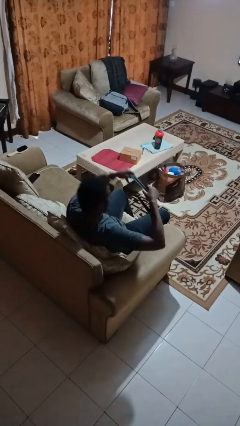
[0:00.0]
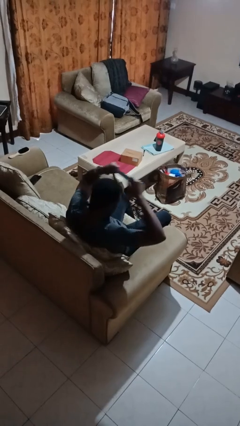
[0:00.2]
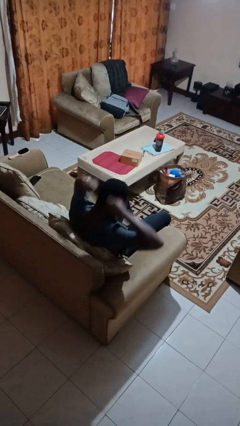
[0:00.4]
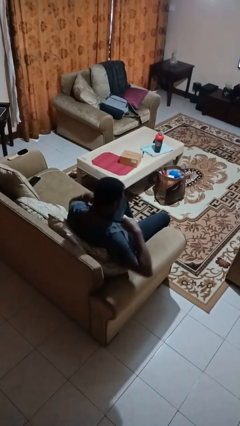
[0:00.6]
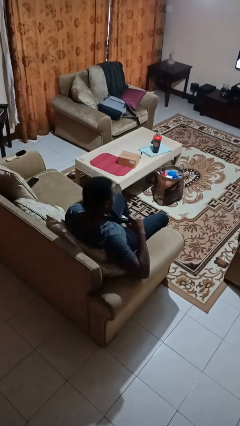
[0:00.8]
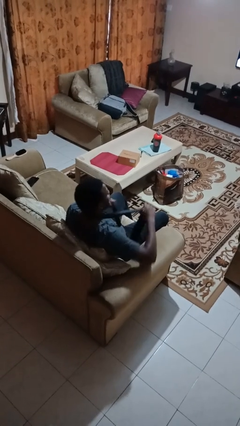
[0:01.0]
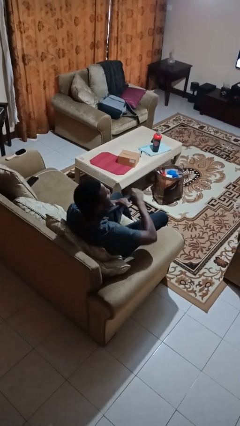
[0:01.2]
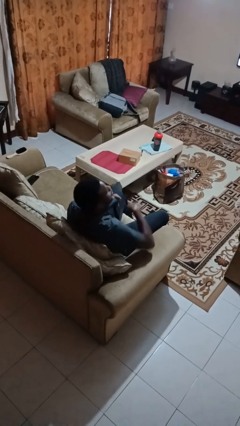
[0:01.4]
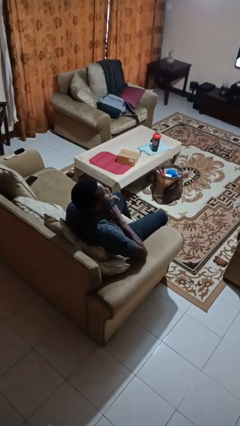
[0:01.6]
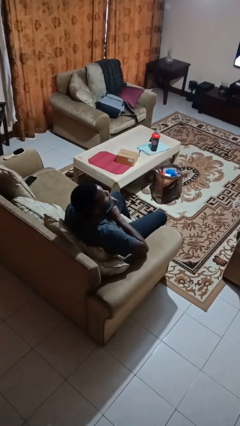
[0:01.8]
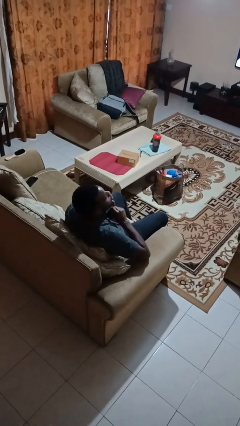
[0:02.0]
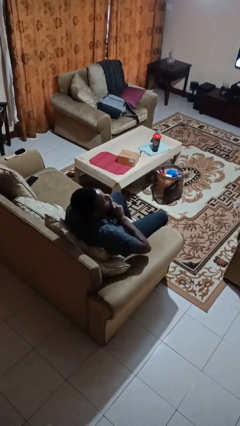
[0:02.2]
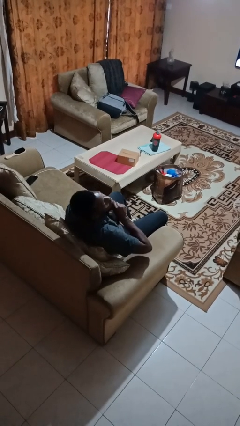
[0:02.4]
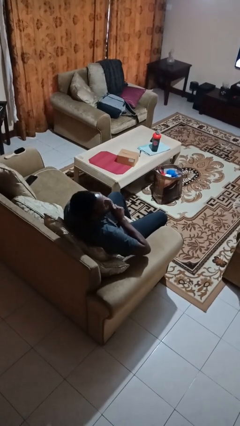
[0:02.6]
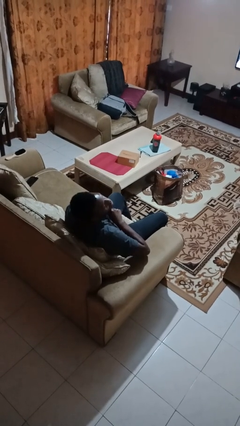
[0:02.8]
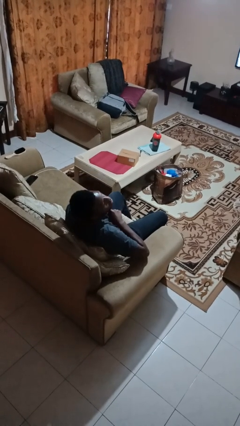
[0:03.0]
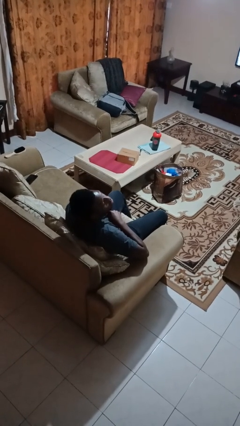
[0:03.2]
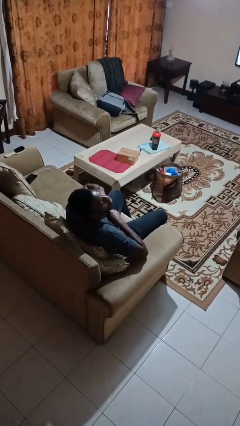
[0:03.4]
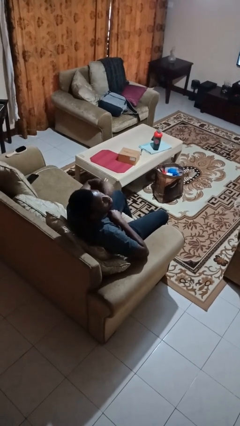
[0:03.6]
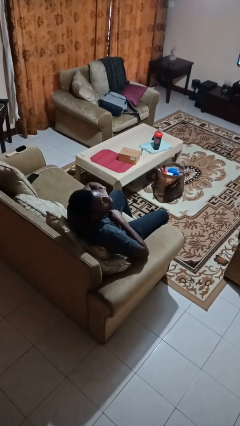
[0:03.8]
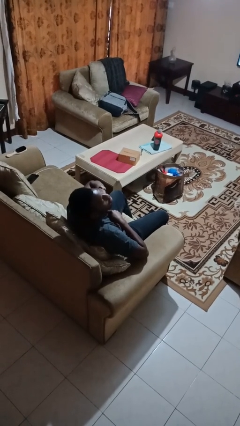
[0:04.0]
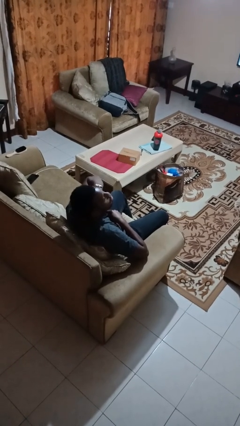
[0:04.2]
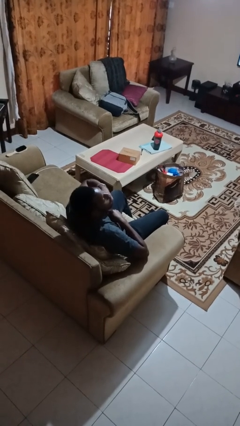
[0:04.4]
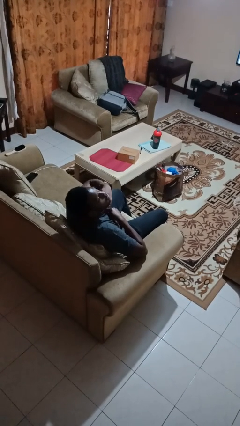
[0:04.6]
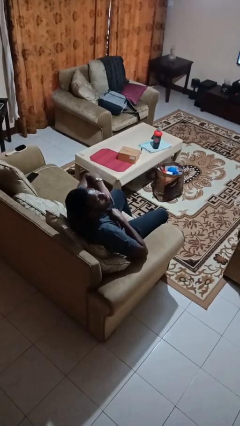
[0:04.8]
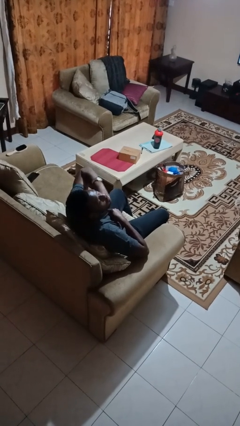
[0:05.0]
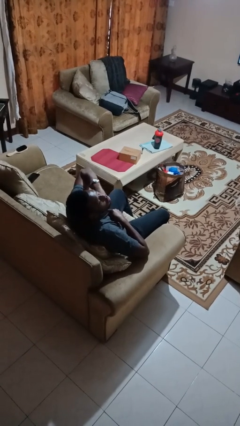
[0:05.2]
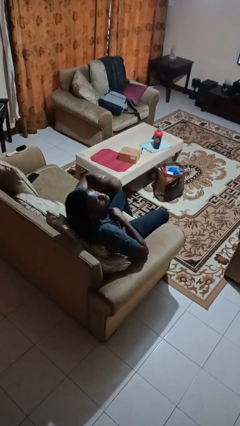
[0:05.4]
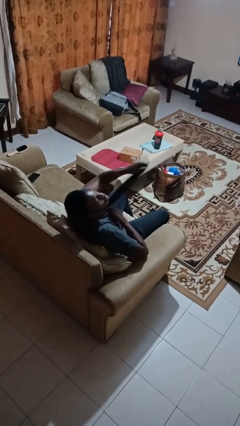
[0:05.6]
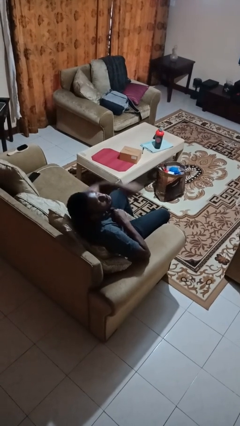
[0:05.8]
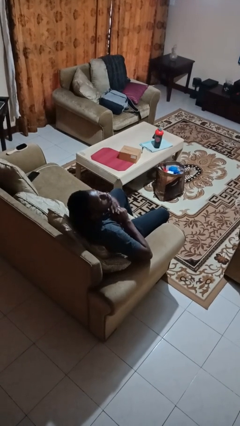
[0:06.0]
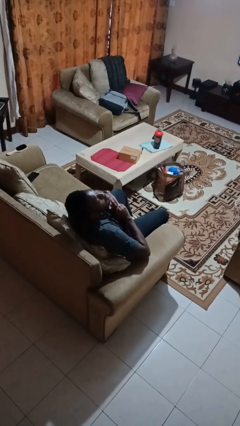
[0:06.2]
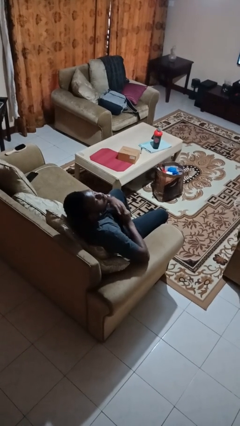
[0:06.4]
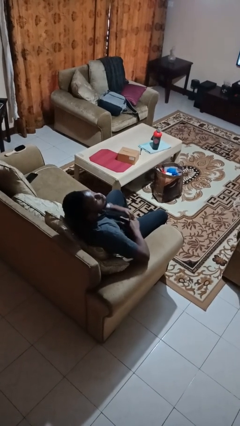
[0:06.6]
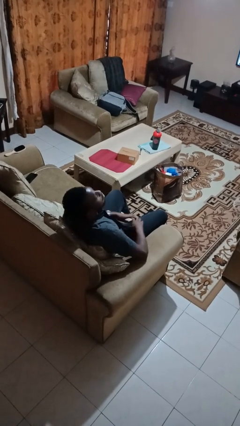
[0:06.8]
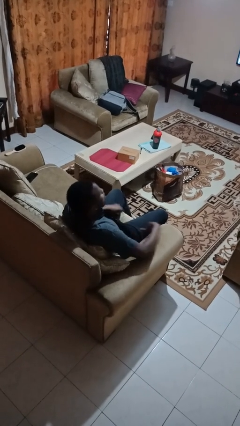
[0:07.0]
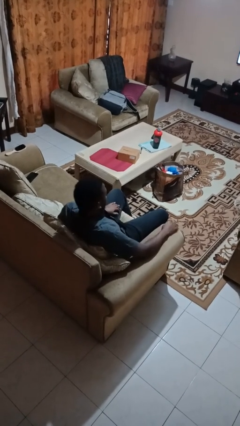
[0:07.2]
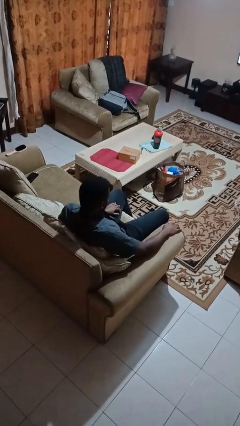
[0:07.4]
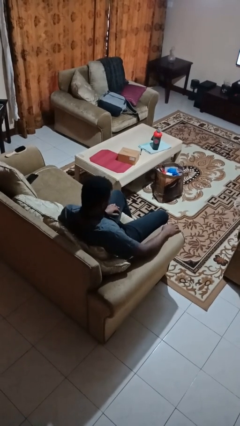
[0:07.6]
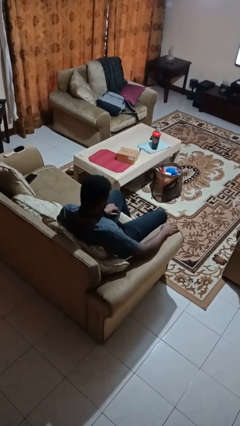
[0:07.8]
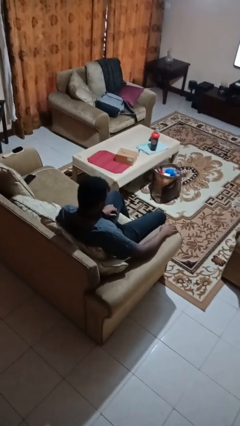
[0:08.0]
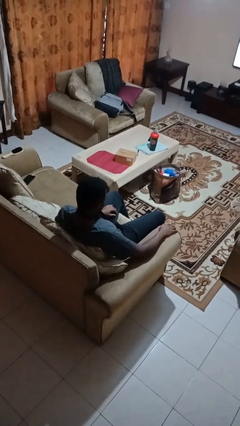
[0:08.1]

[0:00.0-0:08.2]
person puts on necktie

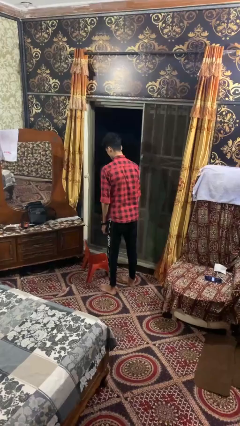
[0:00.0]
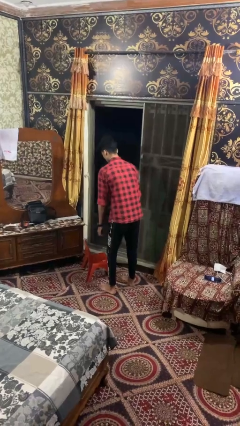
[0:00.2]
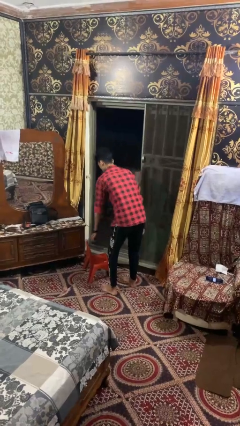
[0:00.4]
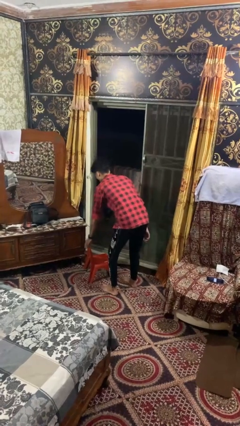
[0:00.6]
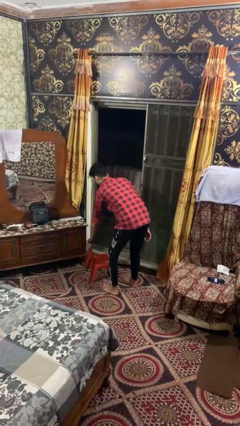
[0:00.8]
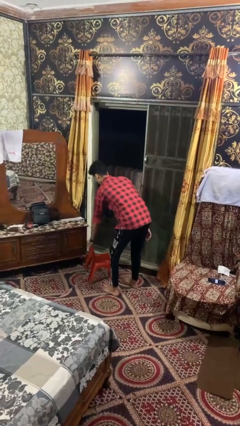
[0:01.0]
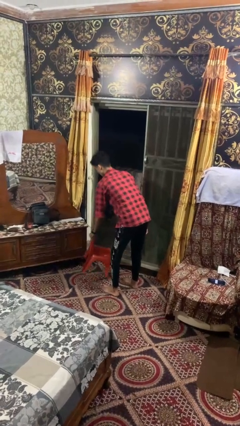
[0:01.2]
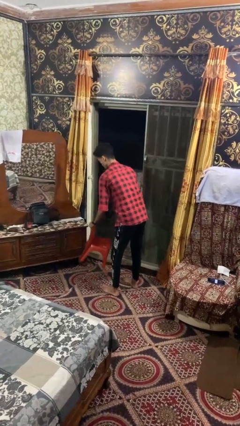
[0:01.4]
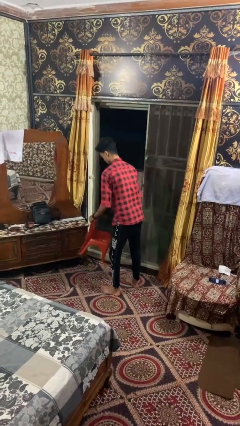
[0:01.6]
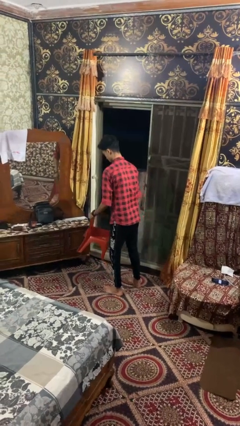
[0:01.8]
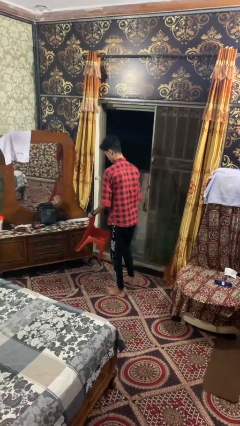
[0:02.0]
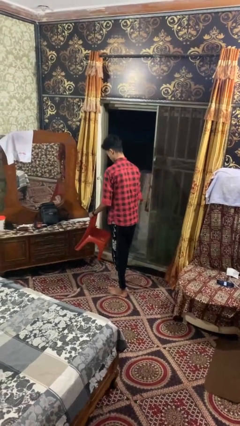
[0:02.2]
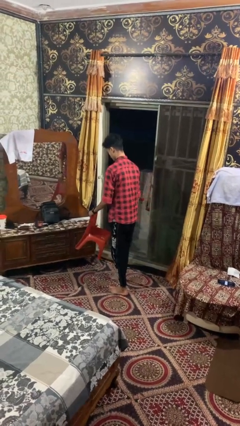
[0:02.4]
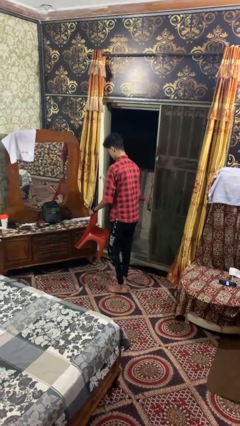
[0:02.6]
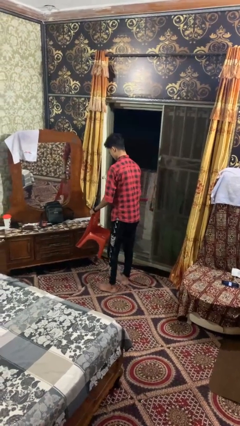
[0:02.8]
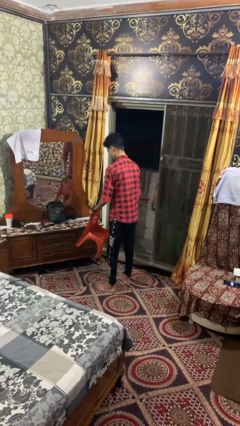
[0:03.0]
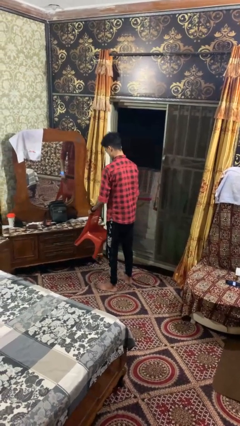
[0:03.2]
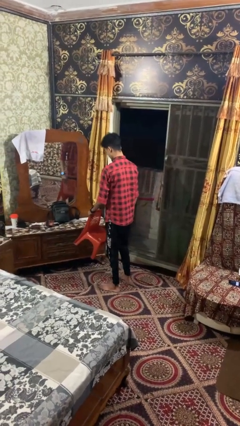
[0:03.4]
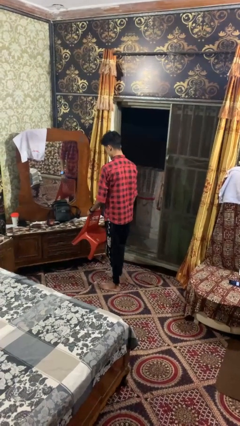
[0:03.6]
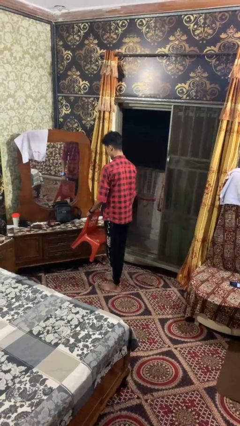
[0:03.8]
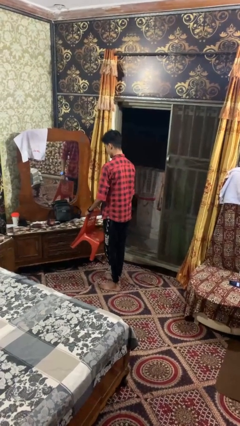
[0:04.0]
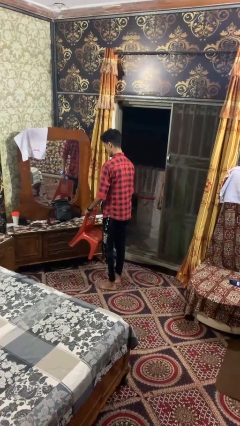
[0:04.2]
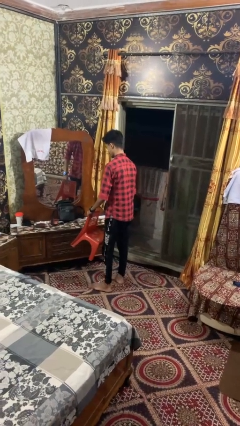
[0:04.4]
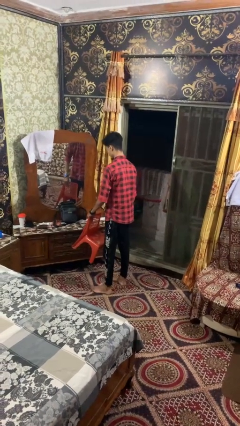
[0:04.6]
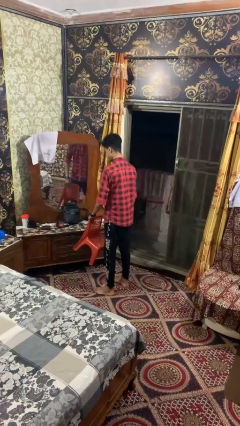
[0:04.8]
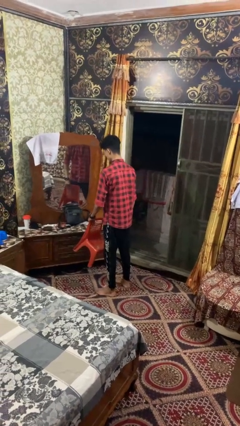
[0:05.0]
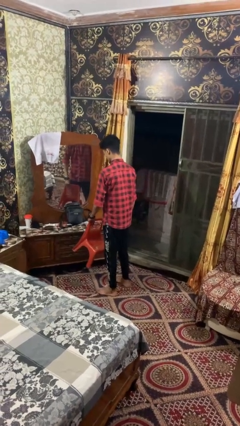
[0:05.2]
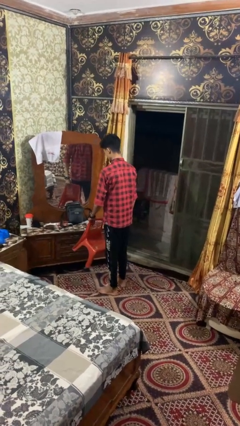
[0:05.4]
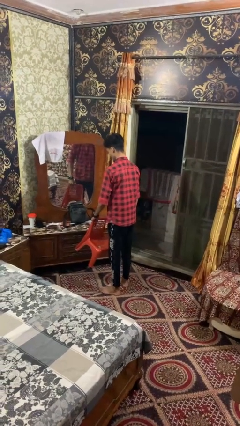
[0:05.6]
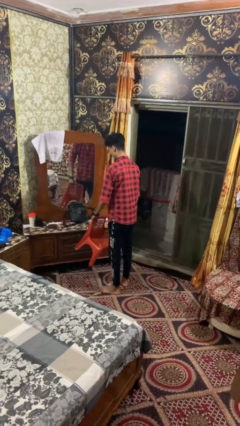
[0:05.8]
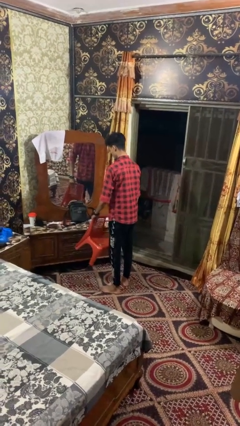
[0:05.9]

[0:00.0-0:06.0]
person carries furniture

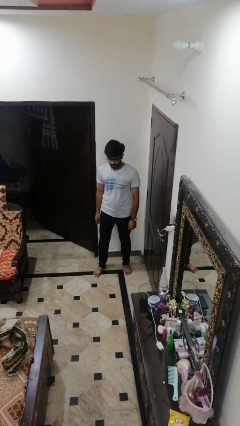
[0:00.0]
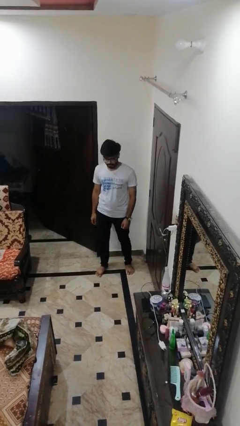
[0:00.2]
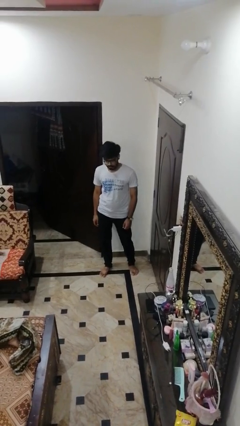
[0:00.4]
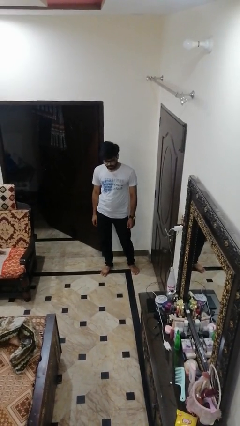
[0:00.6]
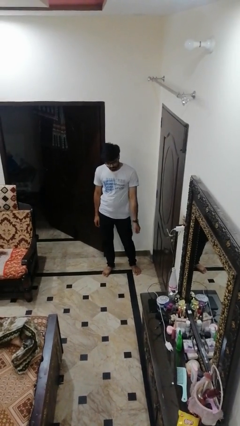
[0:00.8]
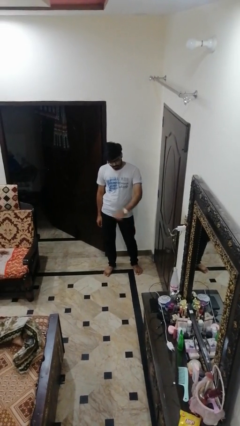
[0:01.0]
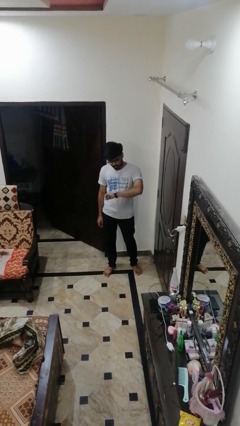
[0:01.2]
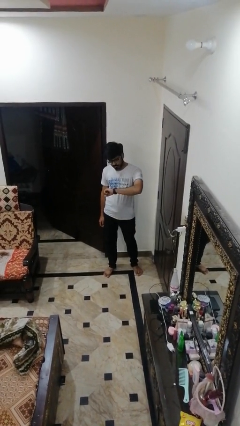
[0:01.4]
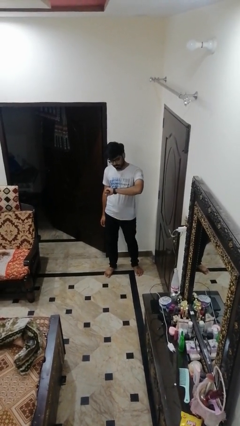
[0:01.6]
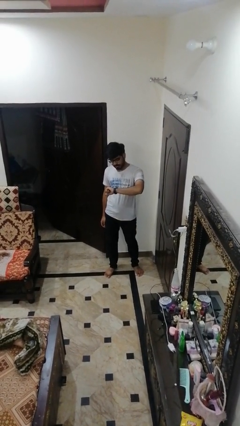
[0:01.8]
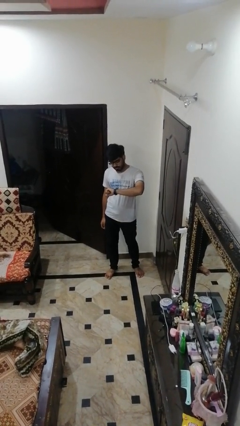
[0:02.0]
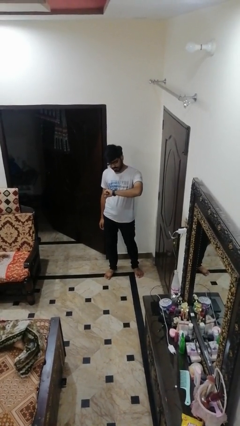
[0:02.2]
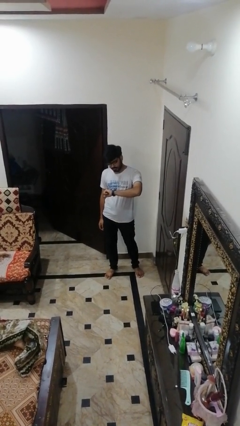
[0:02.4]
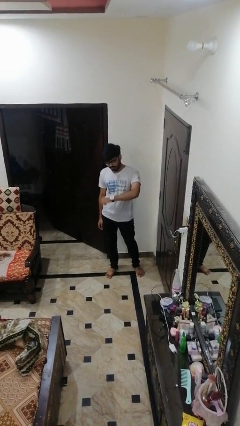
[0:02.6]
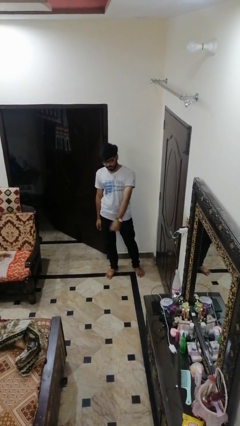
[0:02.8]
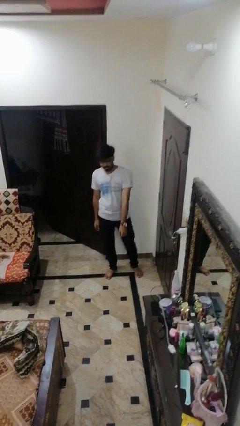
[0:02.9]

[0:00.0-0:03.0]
person looks at wristwatch

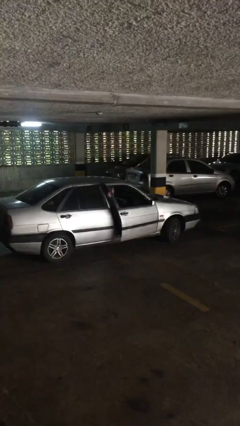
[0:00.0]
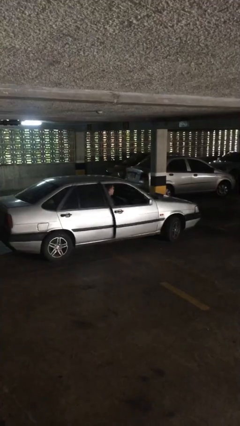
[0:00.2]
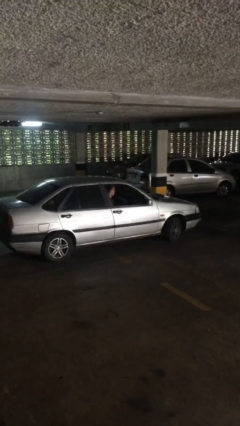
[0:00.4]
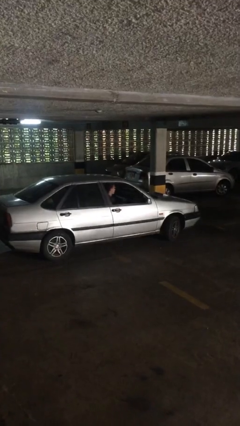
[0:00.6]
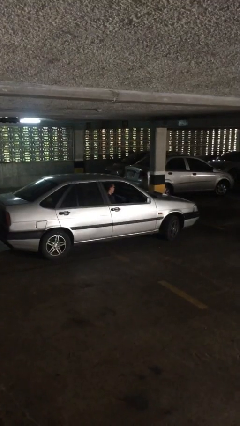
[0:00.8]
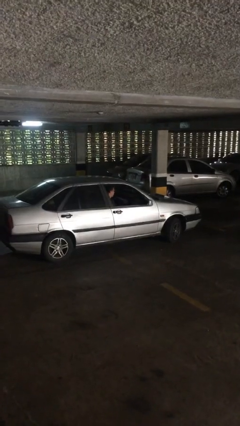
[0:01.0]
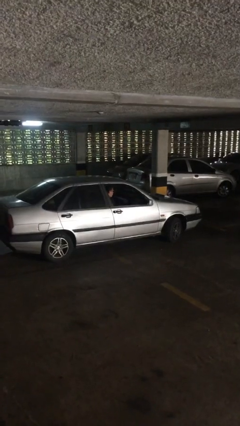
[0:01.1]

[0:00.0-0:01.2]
person closes car door
